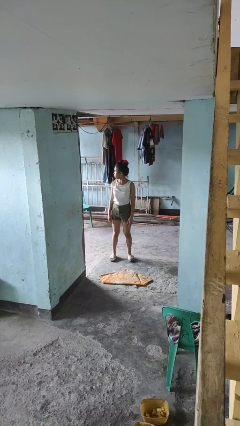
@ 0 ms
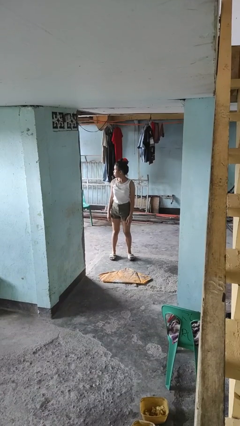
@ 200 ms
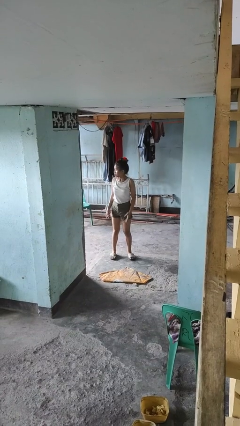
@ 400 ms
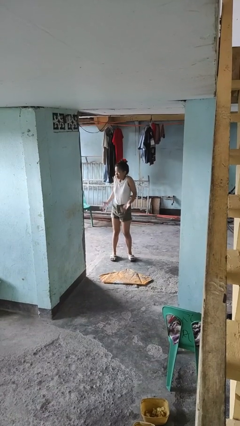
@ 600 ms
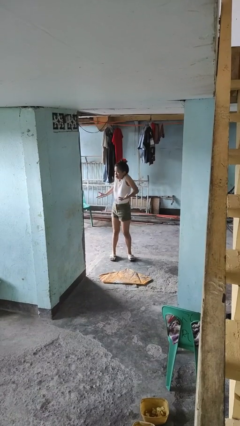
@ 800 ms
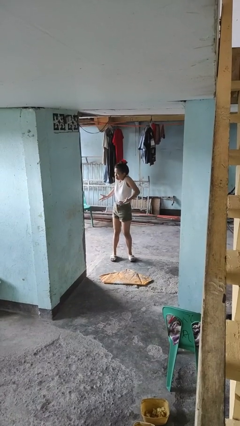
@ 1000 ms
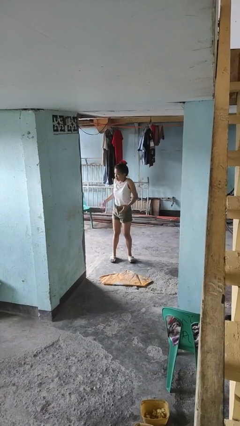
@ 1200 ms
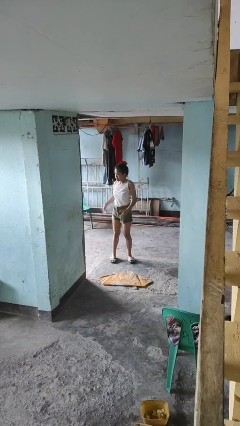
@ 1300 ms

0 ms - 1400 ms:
person shrugs

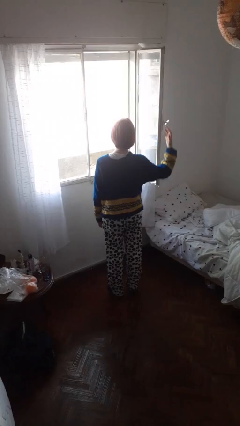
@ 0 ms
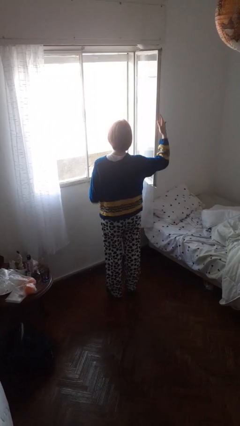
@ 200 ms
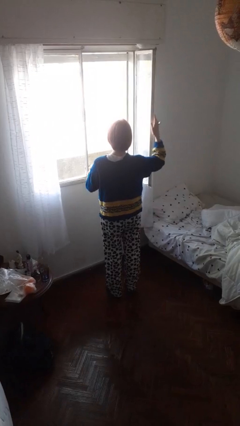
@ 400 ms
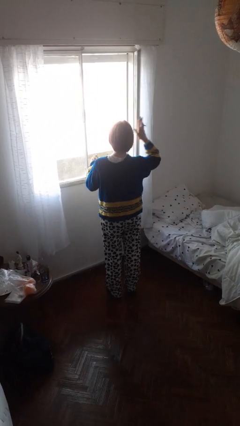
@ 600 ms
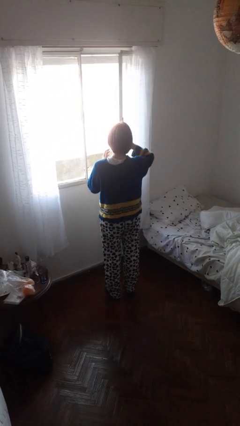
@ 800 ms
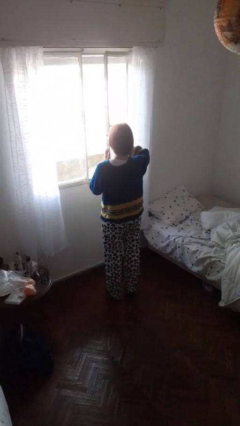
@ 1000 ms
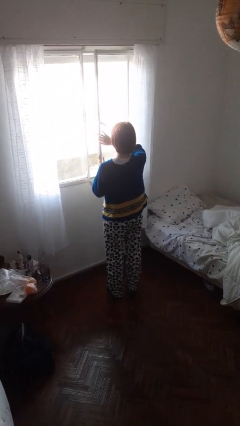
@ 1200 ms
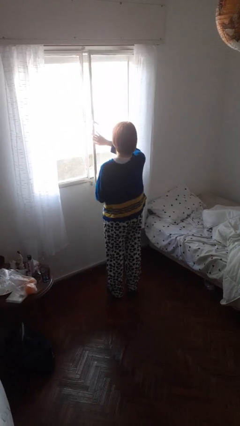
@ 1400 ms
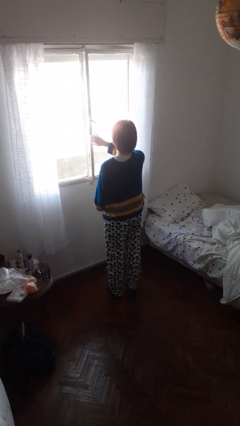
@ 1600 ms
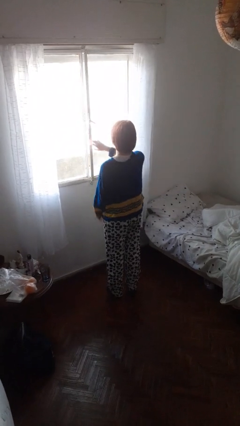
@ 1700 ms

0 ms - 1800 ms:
person closes home window

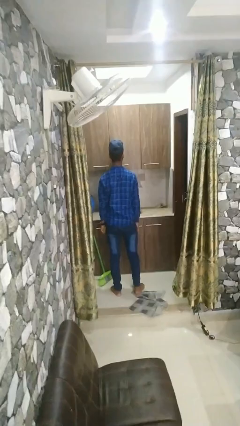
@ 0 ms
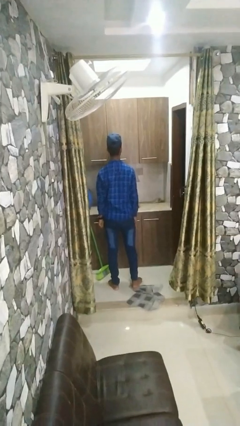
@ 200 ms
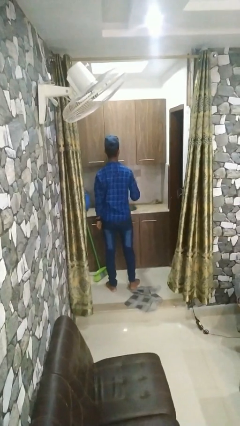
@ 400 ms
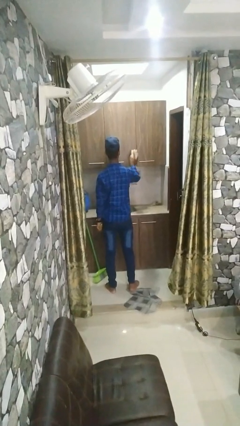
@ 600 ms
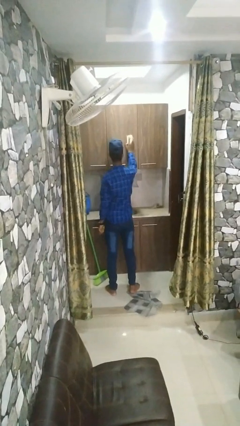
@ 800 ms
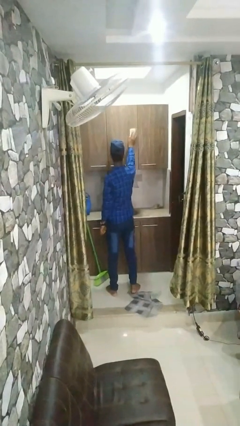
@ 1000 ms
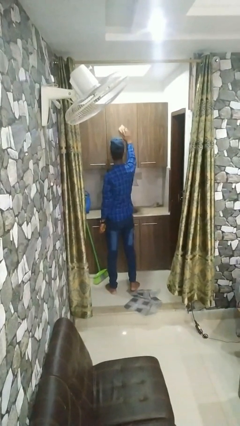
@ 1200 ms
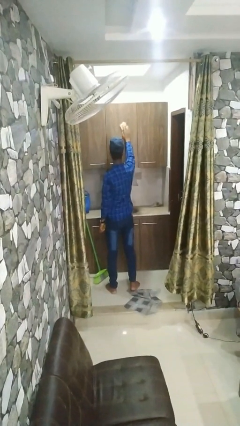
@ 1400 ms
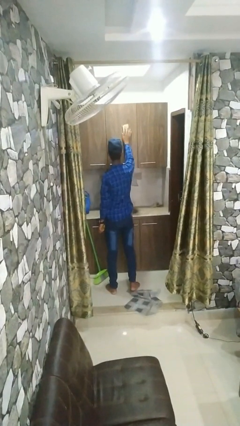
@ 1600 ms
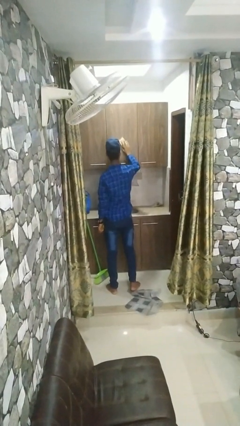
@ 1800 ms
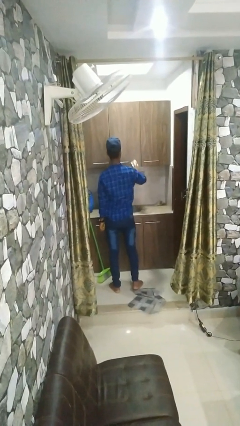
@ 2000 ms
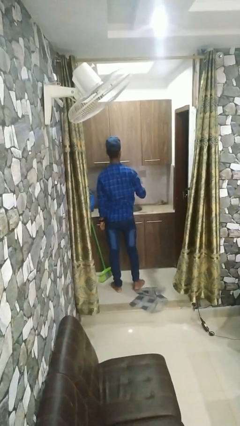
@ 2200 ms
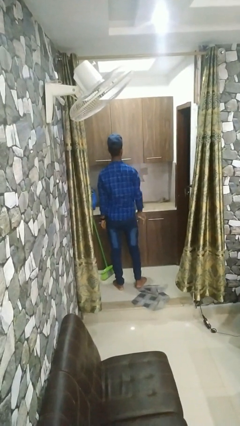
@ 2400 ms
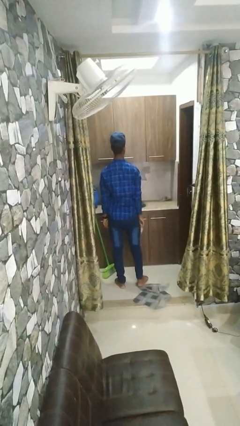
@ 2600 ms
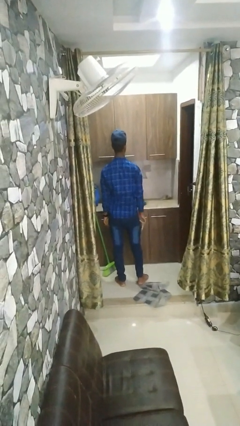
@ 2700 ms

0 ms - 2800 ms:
person washes window

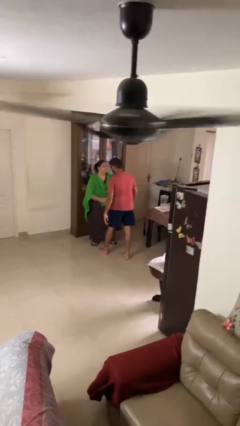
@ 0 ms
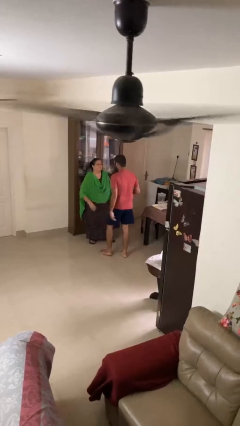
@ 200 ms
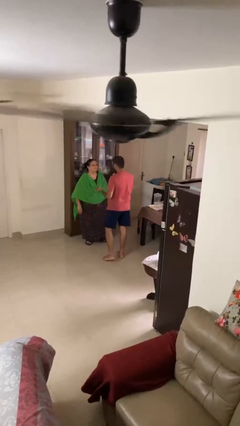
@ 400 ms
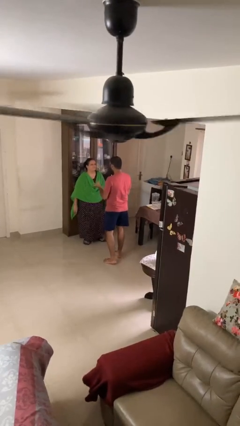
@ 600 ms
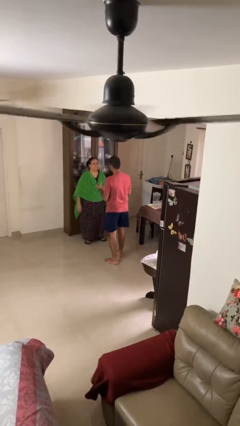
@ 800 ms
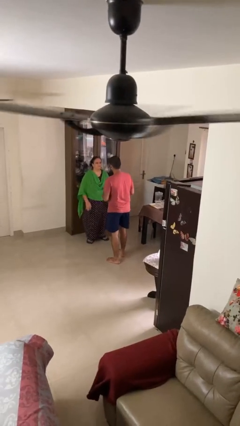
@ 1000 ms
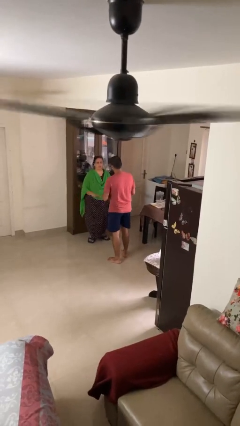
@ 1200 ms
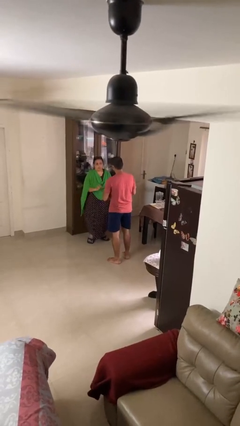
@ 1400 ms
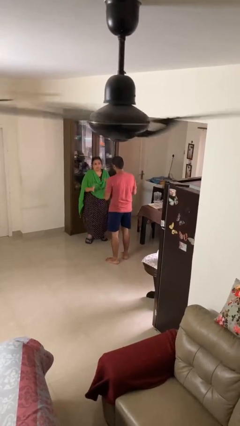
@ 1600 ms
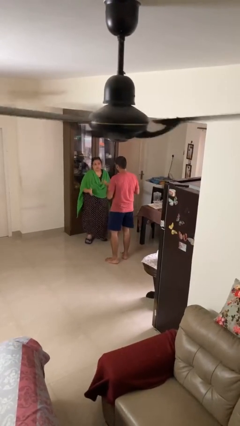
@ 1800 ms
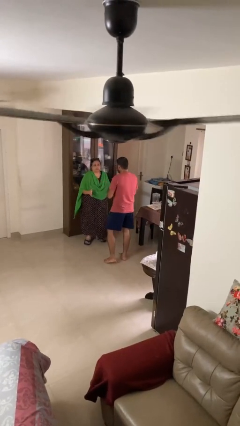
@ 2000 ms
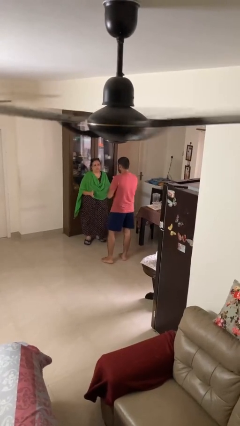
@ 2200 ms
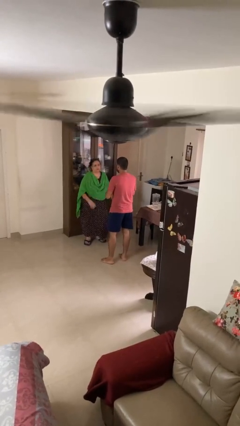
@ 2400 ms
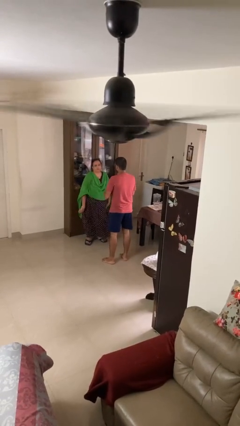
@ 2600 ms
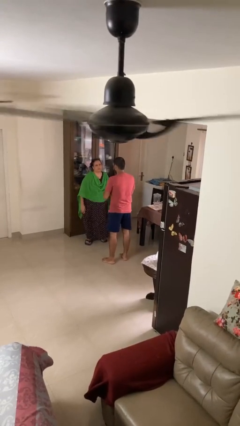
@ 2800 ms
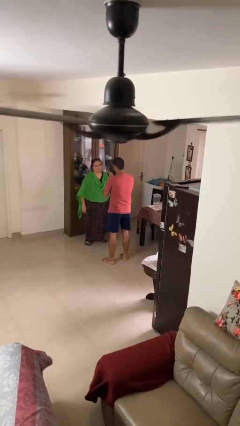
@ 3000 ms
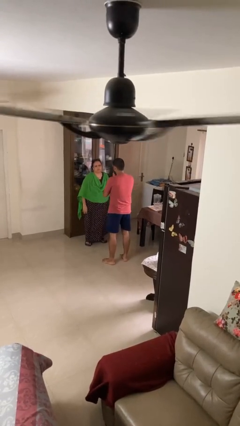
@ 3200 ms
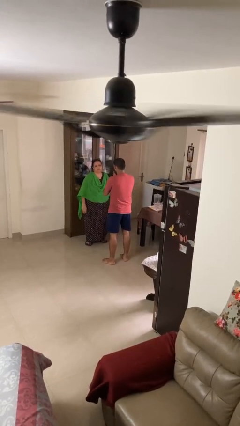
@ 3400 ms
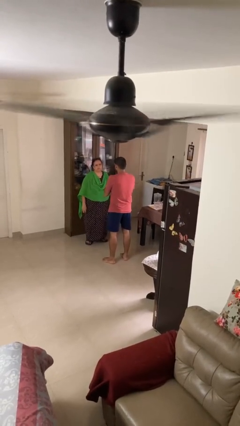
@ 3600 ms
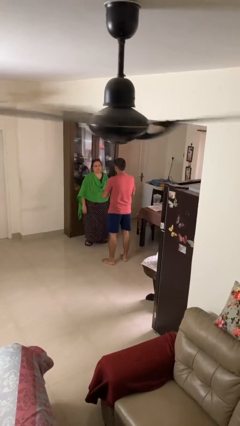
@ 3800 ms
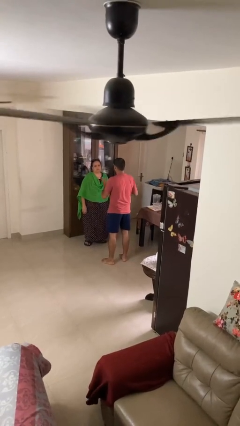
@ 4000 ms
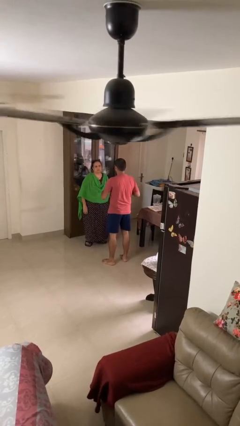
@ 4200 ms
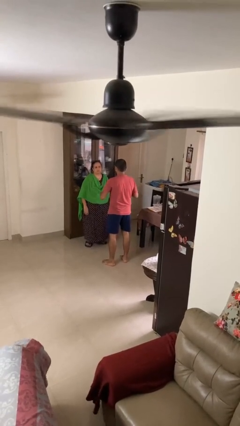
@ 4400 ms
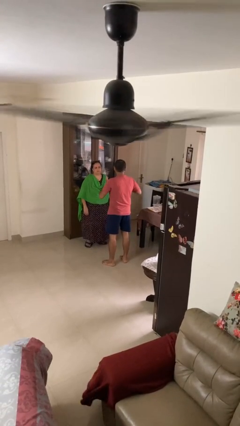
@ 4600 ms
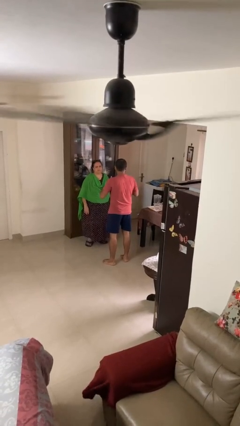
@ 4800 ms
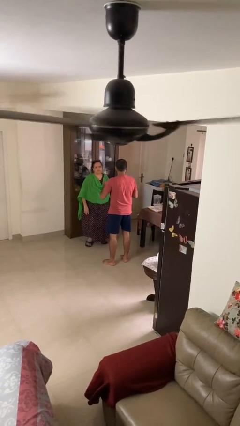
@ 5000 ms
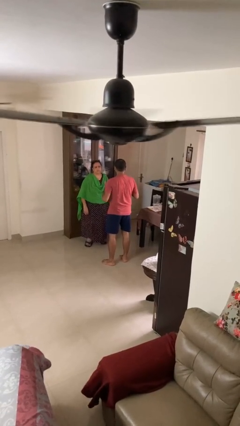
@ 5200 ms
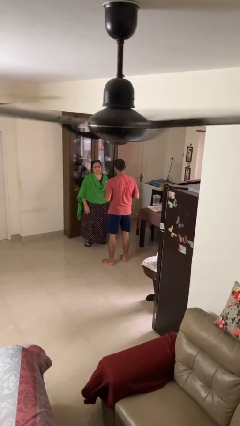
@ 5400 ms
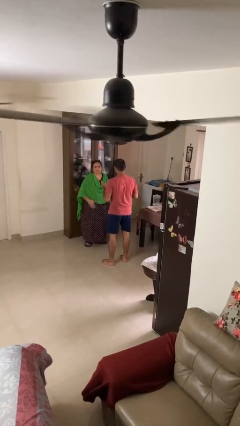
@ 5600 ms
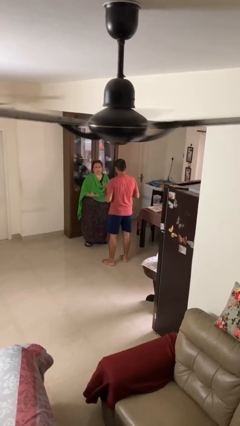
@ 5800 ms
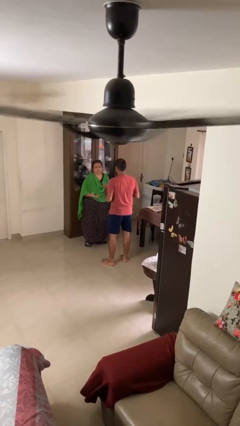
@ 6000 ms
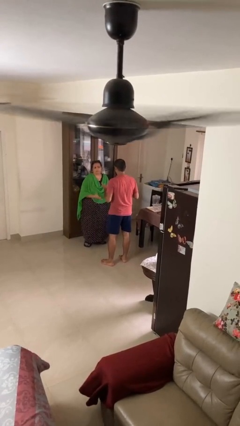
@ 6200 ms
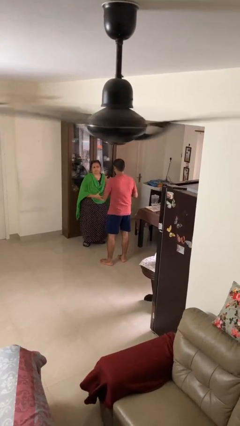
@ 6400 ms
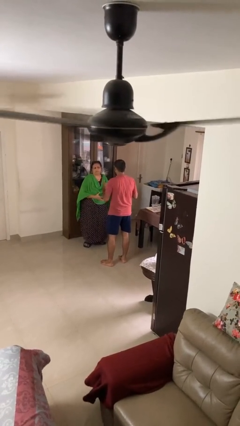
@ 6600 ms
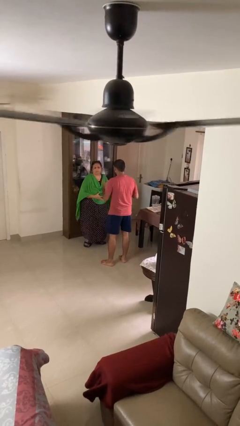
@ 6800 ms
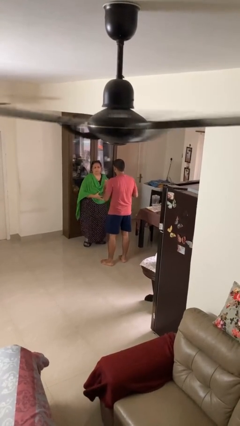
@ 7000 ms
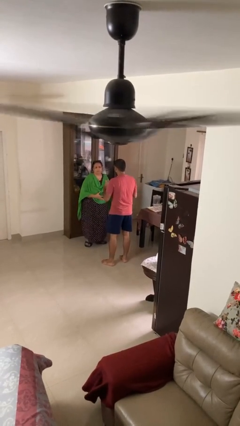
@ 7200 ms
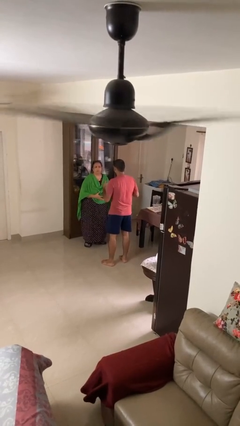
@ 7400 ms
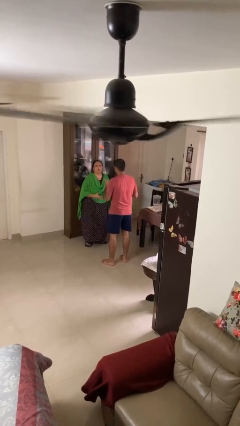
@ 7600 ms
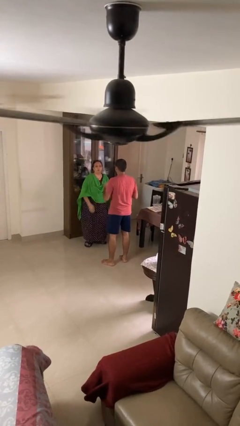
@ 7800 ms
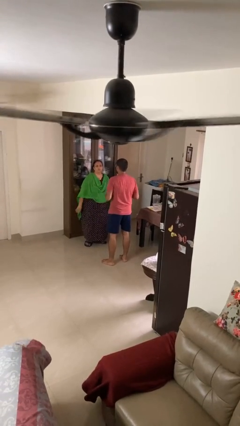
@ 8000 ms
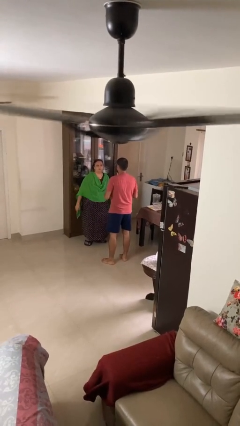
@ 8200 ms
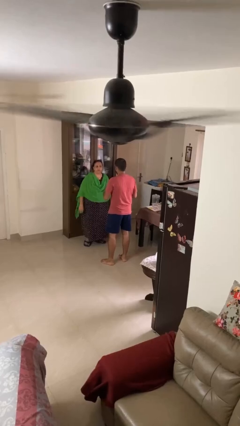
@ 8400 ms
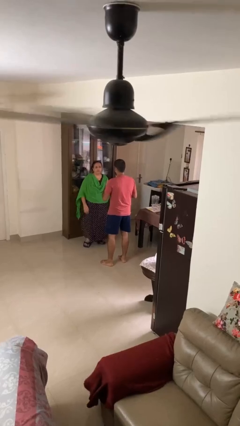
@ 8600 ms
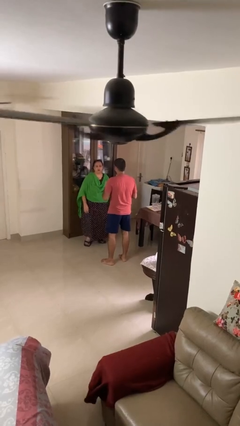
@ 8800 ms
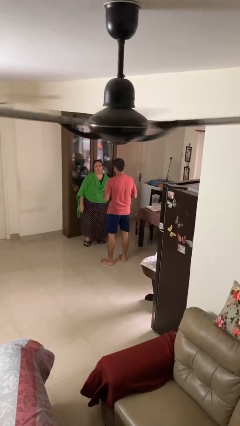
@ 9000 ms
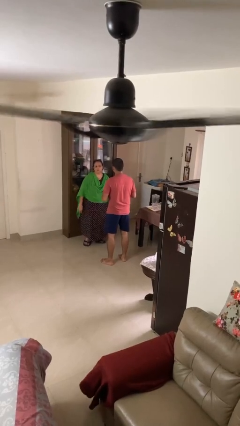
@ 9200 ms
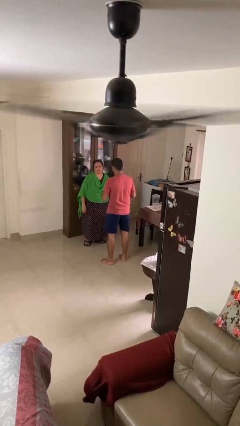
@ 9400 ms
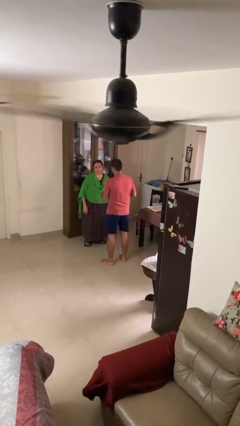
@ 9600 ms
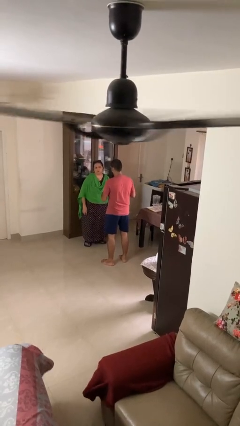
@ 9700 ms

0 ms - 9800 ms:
person talks to person

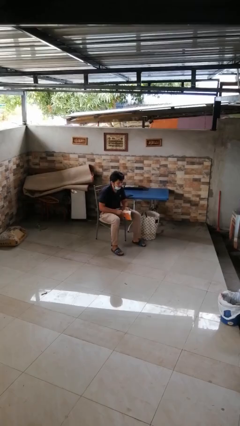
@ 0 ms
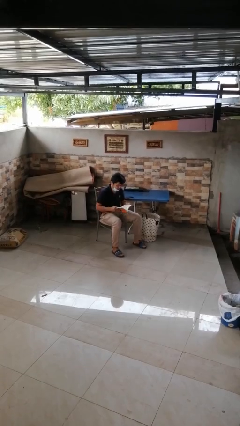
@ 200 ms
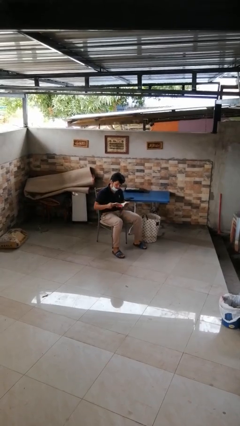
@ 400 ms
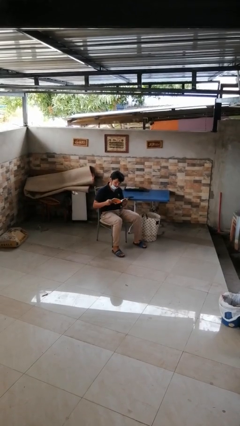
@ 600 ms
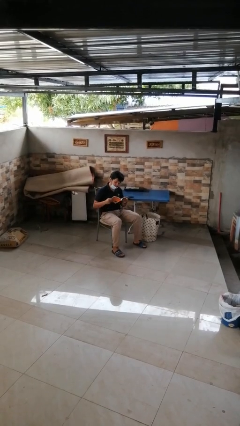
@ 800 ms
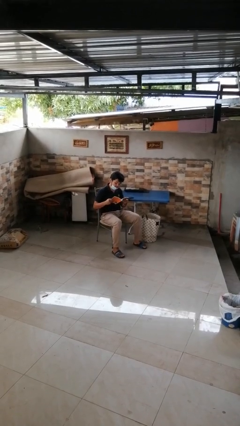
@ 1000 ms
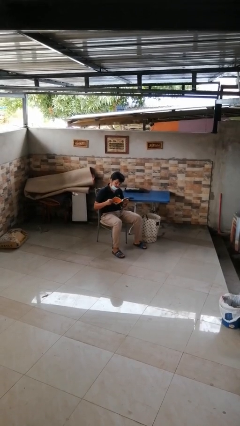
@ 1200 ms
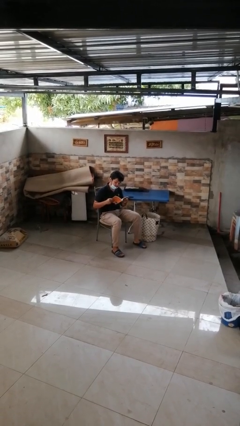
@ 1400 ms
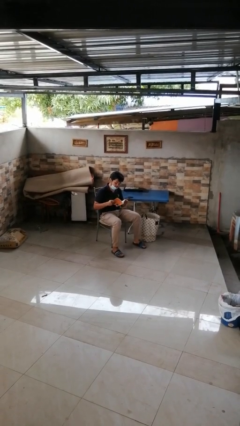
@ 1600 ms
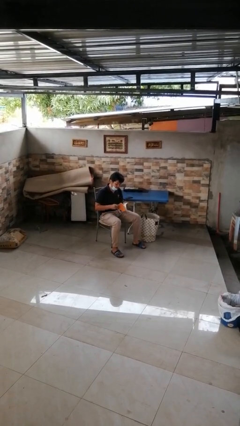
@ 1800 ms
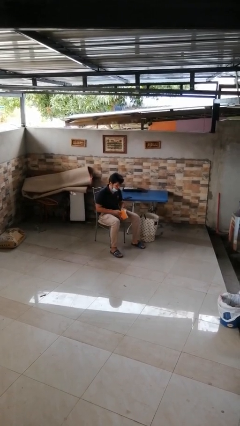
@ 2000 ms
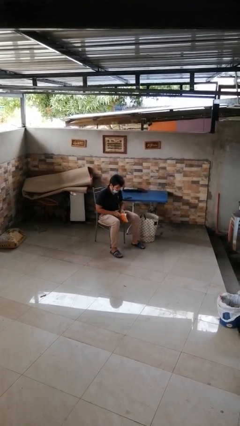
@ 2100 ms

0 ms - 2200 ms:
person reads book
